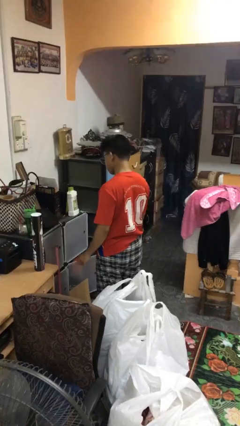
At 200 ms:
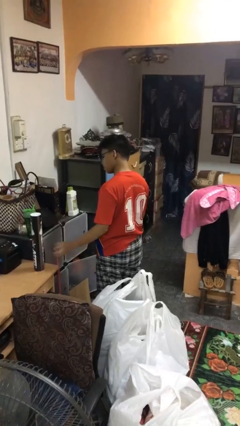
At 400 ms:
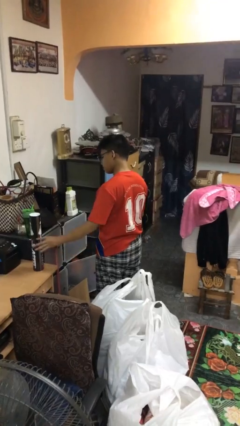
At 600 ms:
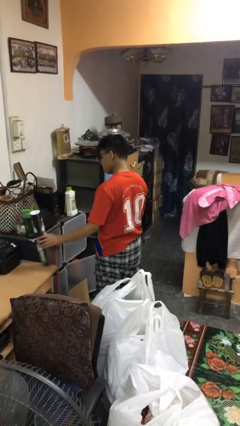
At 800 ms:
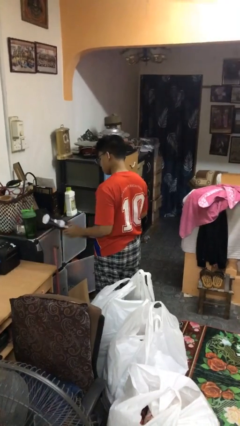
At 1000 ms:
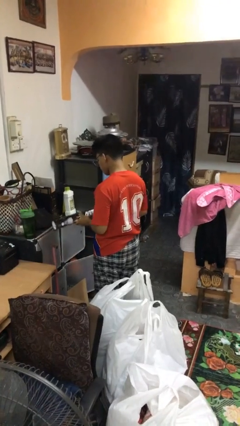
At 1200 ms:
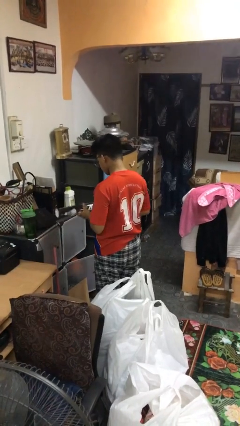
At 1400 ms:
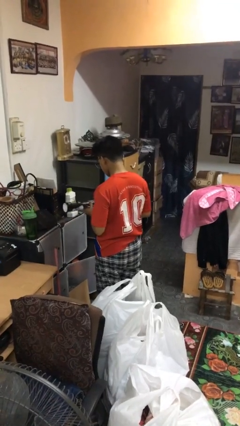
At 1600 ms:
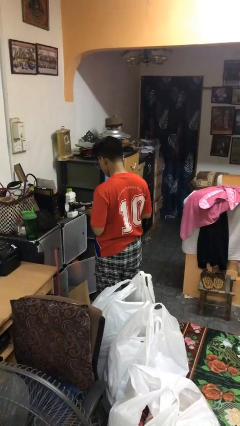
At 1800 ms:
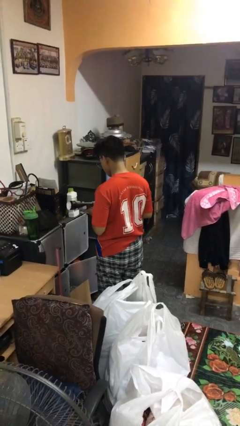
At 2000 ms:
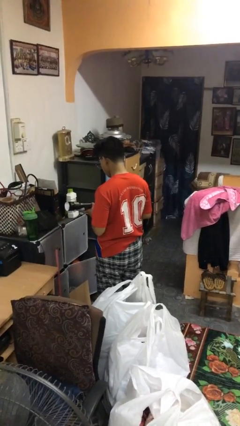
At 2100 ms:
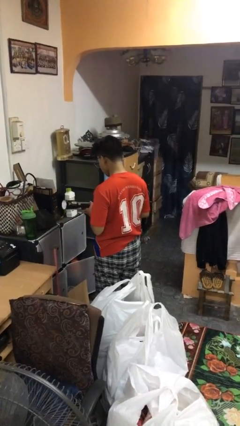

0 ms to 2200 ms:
person picks up object from countertop

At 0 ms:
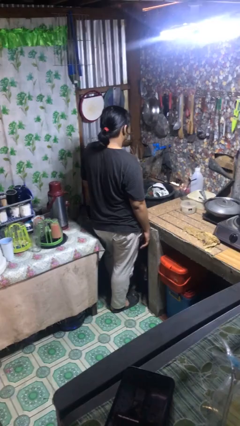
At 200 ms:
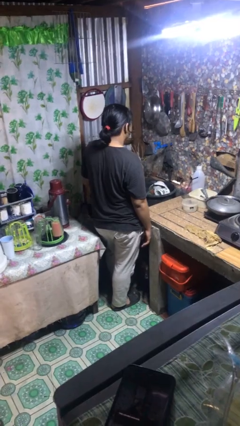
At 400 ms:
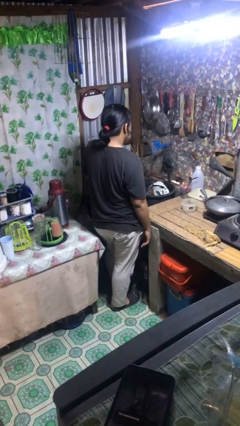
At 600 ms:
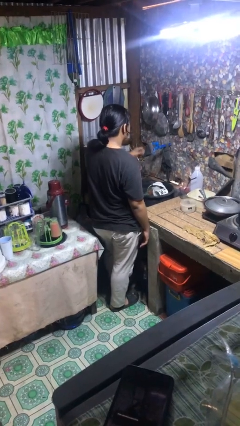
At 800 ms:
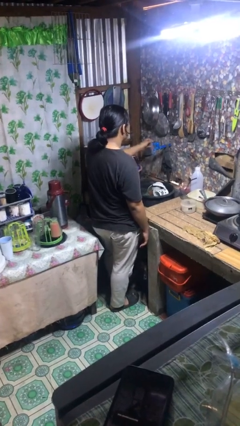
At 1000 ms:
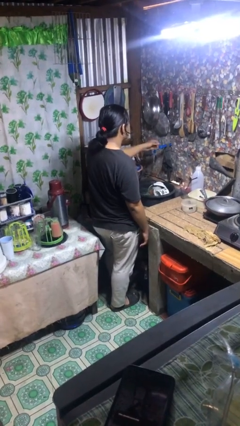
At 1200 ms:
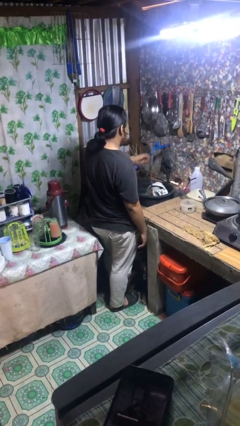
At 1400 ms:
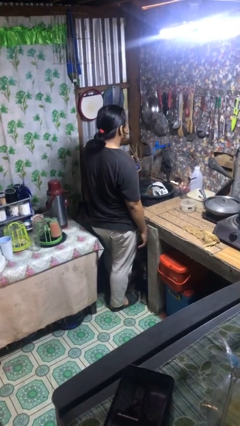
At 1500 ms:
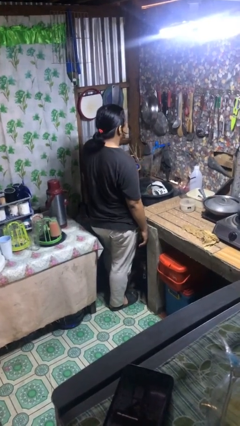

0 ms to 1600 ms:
person turns on faucet

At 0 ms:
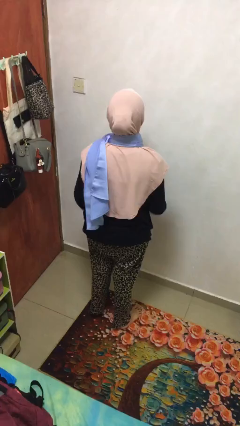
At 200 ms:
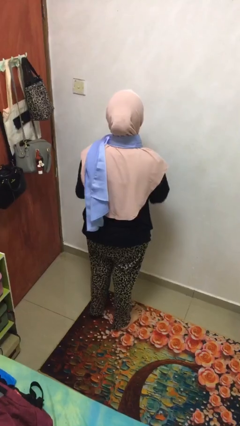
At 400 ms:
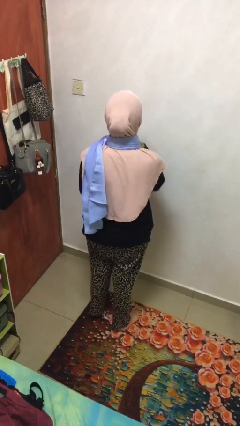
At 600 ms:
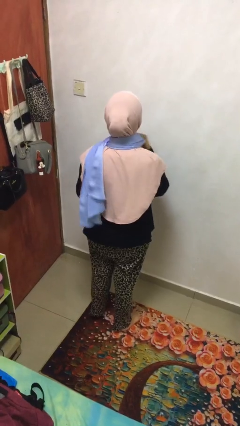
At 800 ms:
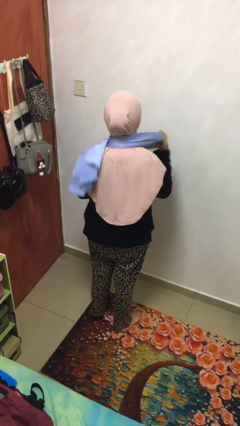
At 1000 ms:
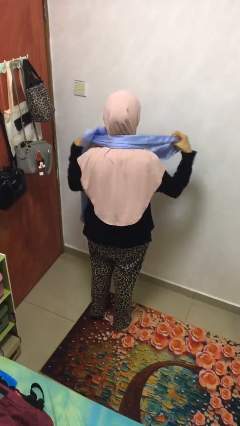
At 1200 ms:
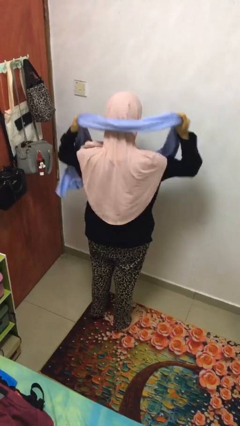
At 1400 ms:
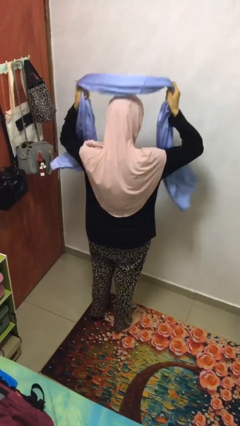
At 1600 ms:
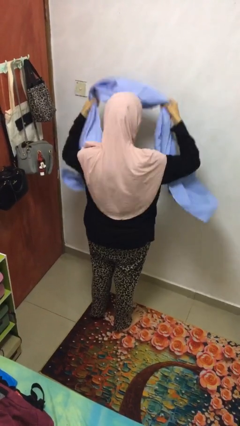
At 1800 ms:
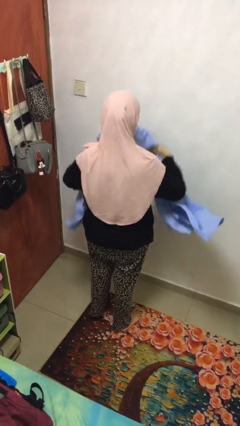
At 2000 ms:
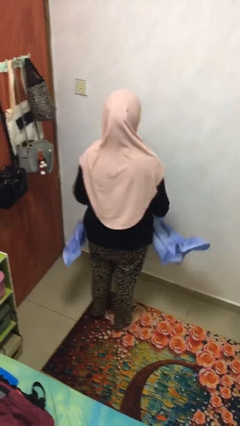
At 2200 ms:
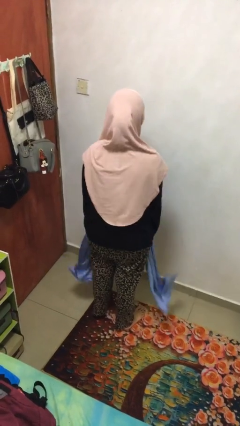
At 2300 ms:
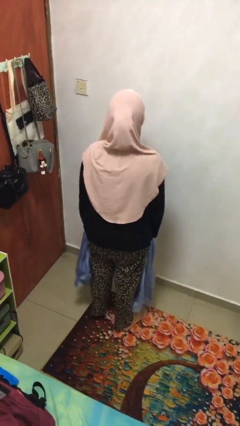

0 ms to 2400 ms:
person takes off scarf

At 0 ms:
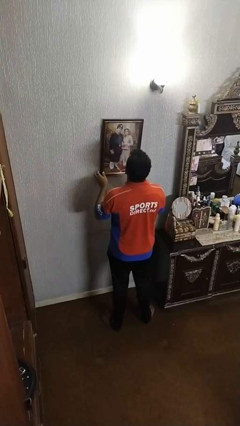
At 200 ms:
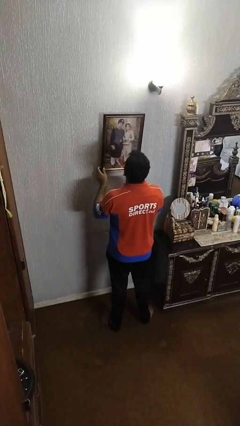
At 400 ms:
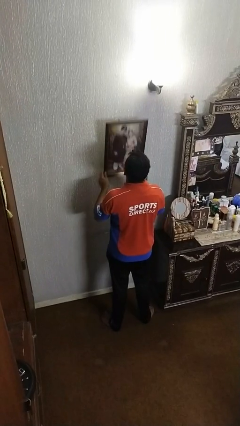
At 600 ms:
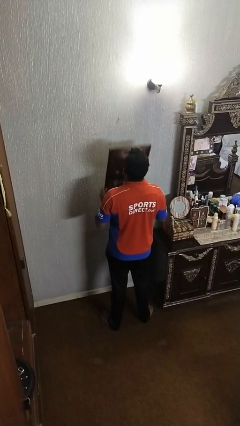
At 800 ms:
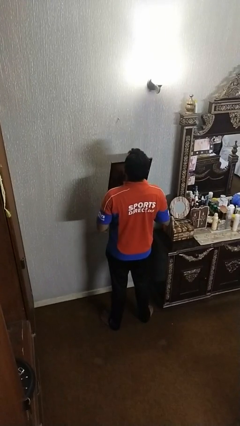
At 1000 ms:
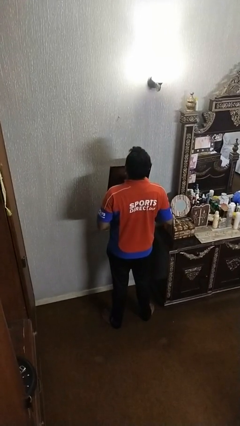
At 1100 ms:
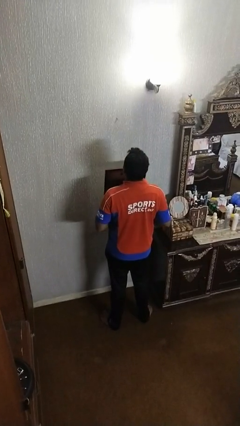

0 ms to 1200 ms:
person takes down picture frame

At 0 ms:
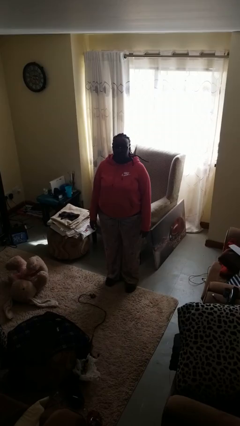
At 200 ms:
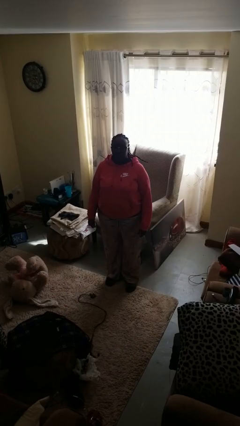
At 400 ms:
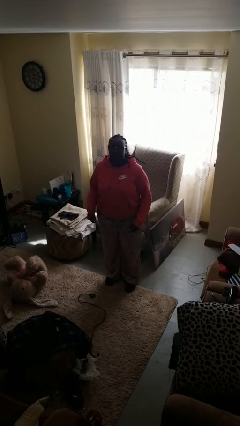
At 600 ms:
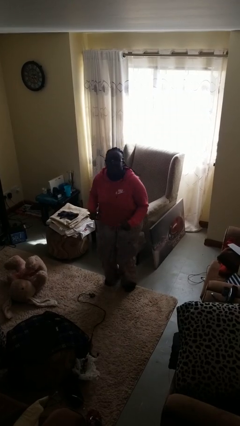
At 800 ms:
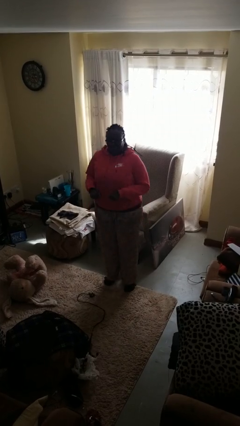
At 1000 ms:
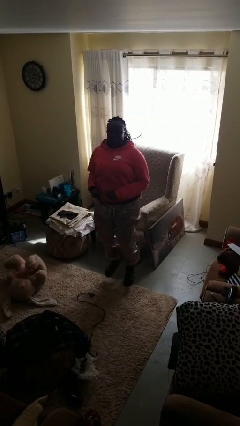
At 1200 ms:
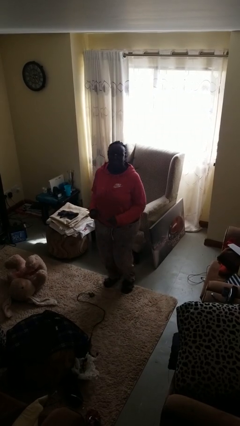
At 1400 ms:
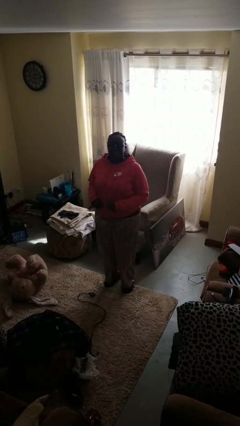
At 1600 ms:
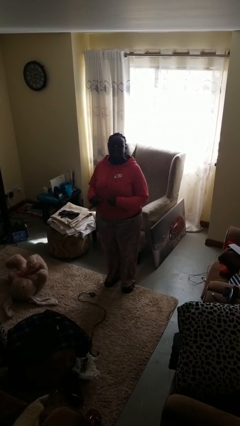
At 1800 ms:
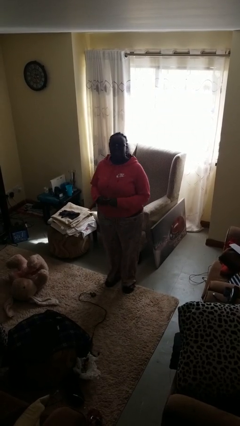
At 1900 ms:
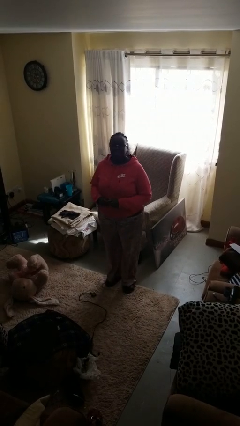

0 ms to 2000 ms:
person jumps

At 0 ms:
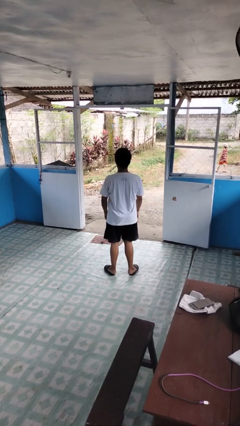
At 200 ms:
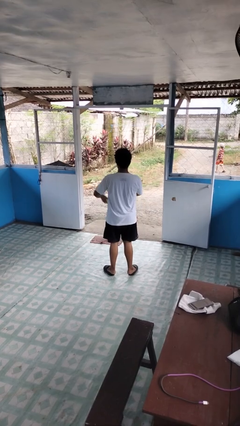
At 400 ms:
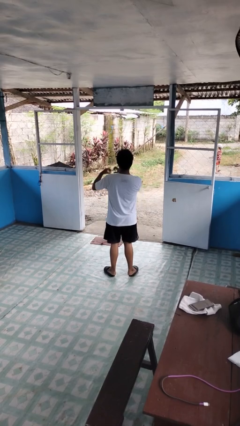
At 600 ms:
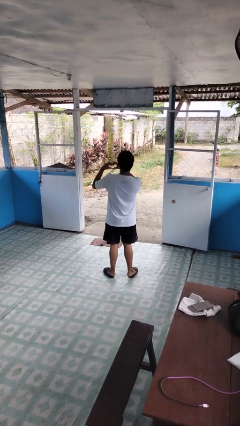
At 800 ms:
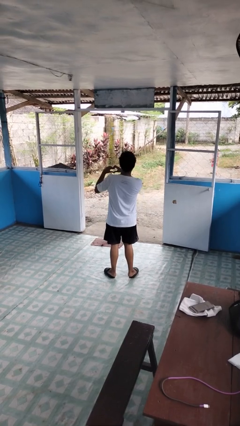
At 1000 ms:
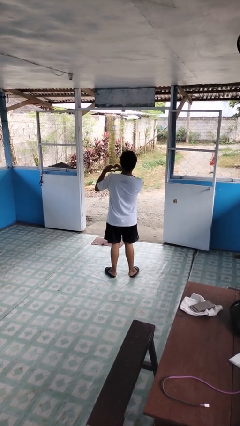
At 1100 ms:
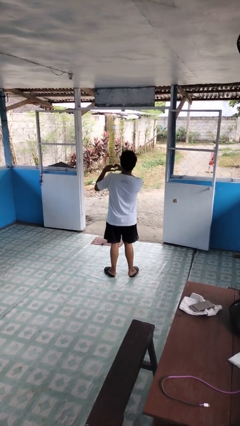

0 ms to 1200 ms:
person gestures heart

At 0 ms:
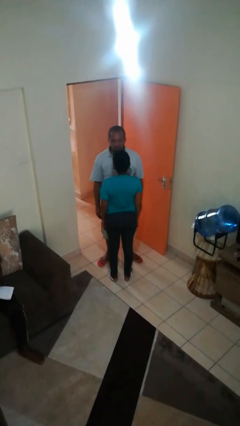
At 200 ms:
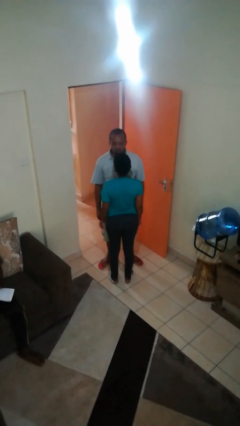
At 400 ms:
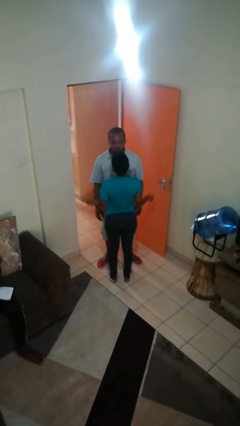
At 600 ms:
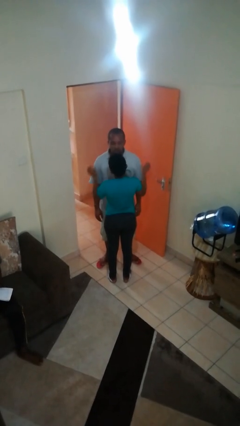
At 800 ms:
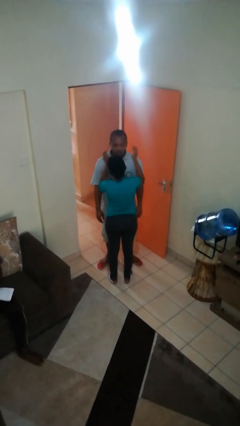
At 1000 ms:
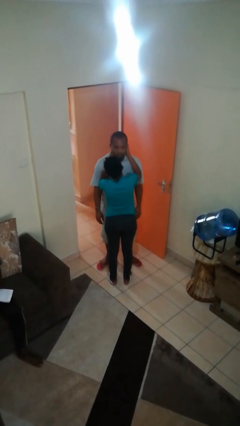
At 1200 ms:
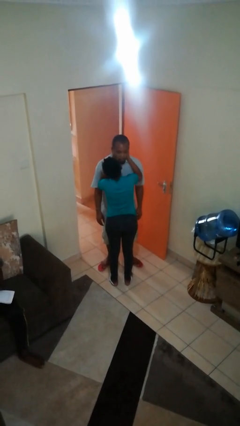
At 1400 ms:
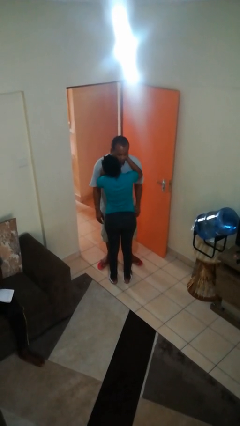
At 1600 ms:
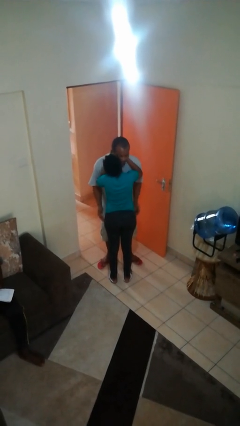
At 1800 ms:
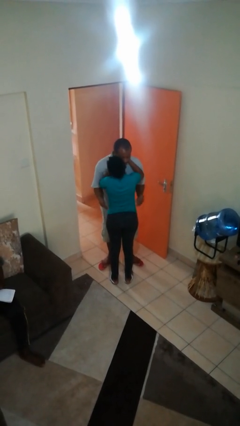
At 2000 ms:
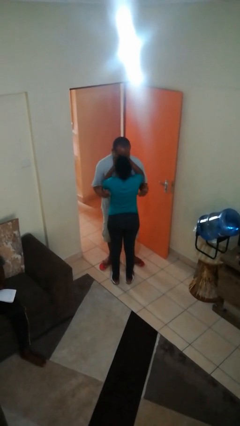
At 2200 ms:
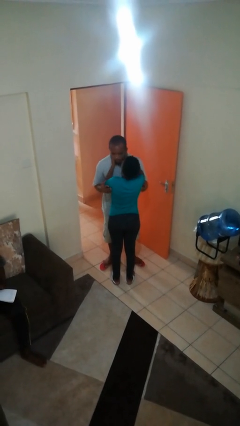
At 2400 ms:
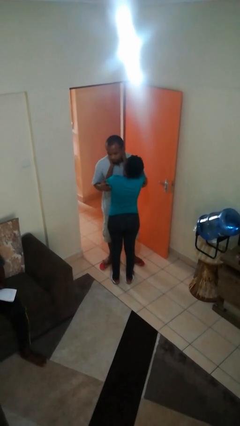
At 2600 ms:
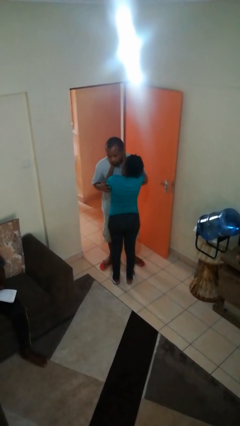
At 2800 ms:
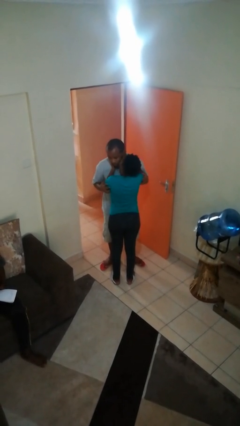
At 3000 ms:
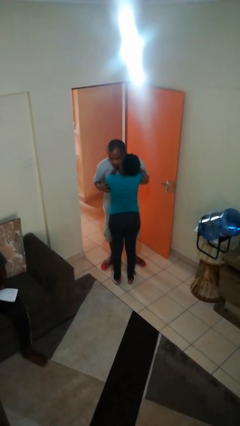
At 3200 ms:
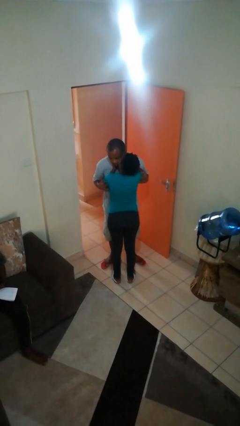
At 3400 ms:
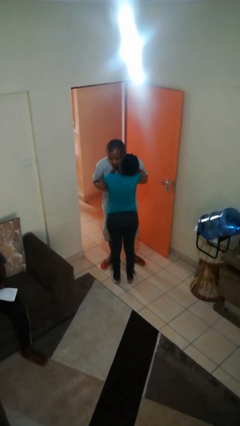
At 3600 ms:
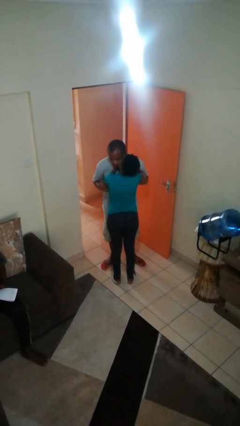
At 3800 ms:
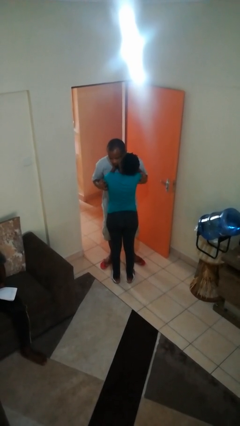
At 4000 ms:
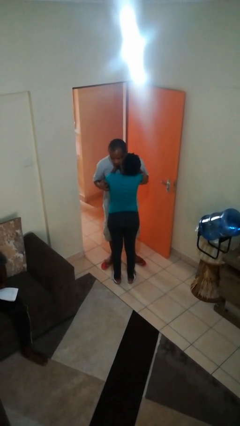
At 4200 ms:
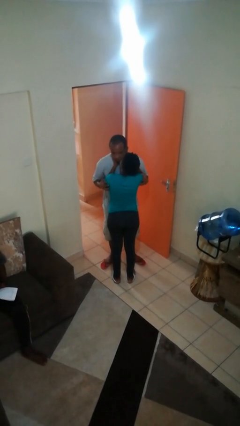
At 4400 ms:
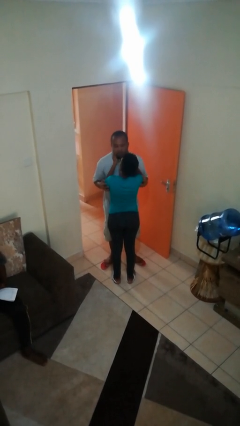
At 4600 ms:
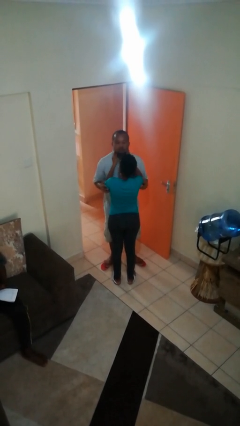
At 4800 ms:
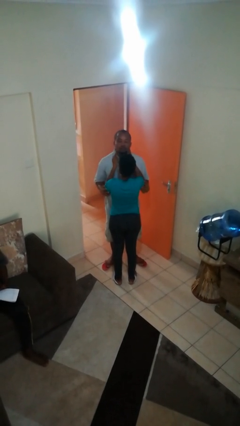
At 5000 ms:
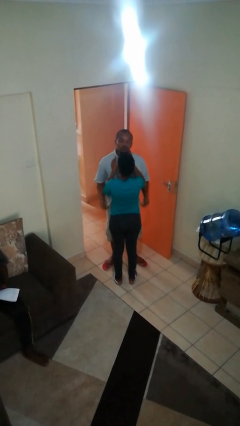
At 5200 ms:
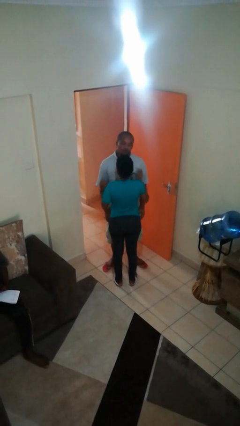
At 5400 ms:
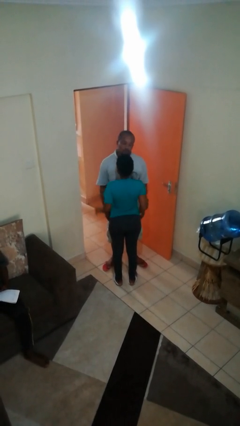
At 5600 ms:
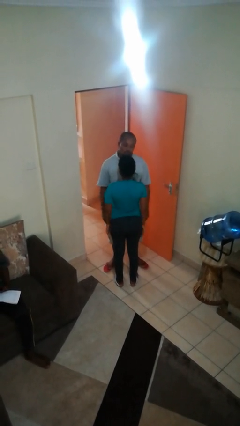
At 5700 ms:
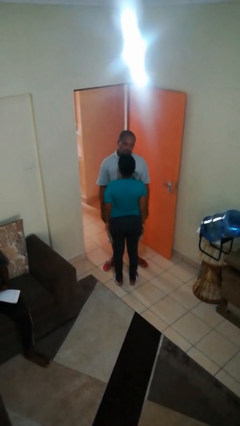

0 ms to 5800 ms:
person kisses cheek of person

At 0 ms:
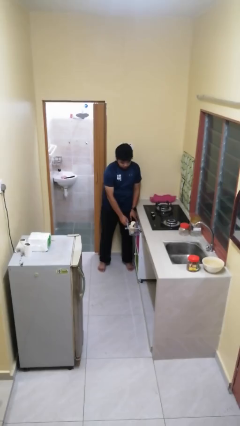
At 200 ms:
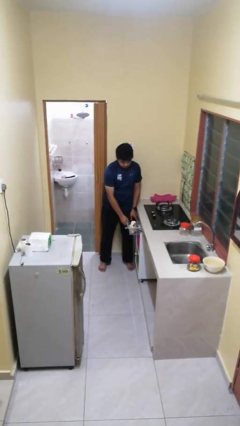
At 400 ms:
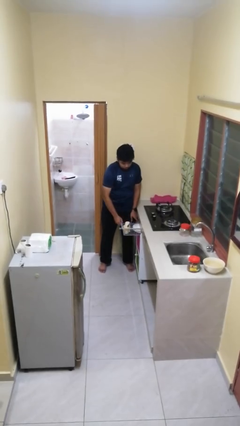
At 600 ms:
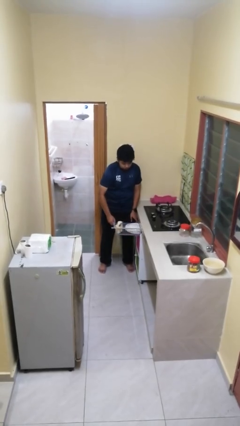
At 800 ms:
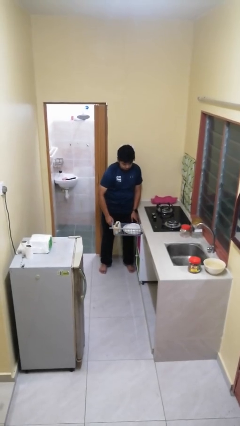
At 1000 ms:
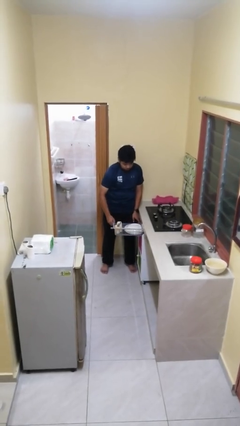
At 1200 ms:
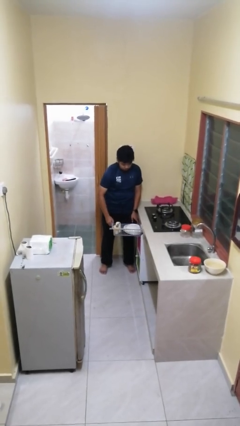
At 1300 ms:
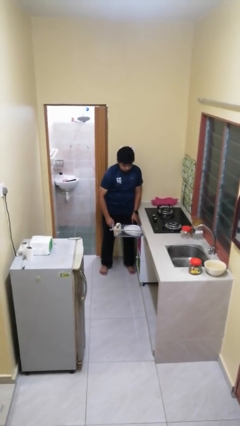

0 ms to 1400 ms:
person opens kitchen drawer
